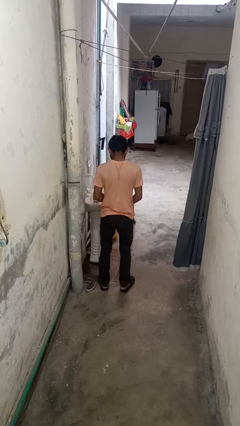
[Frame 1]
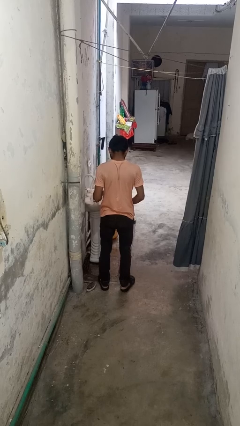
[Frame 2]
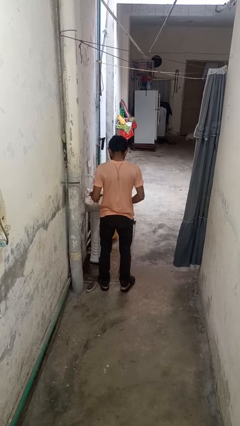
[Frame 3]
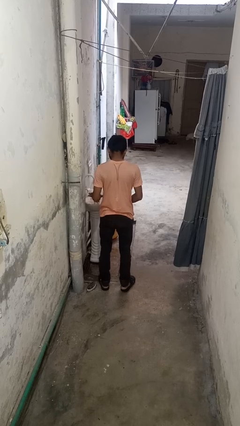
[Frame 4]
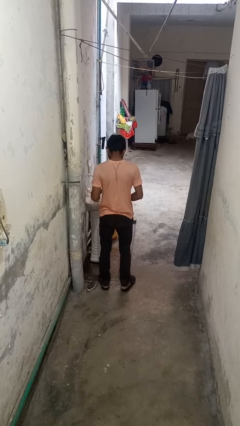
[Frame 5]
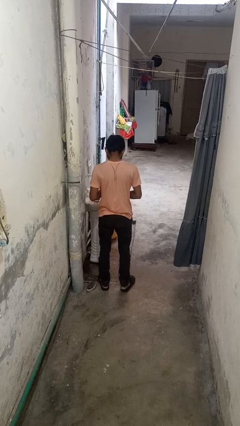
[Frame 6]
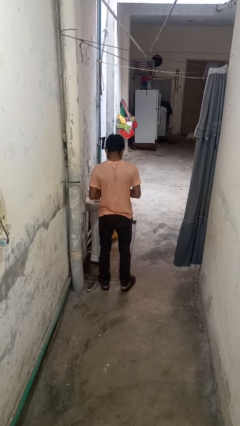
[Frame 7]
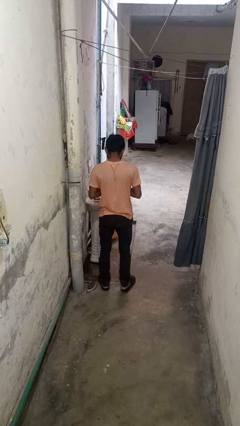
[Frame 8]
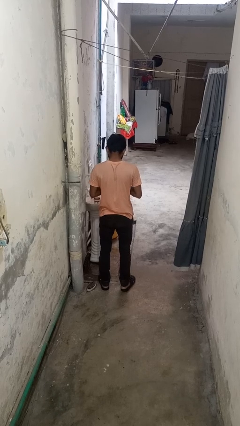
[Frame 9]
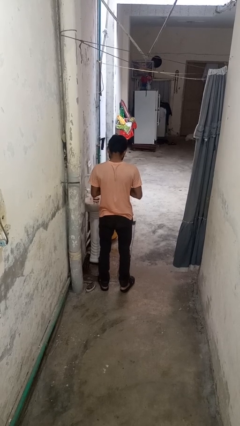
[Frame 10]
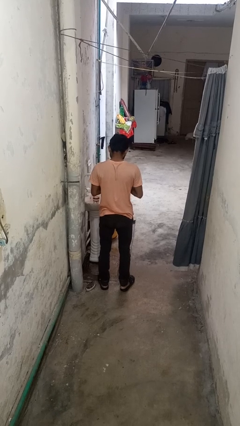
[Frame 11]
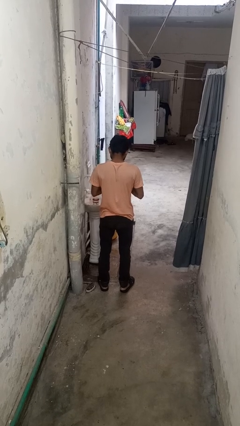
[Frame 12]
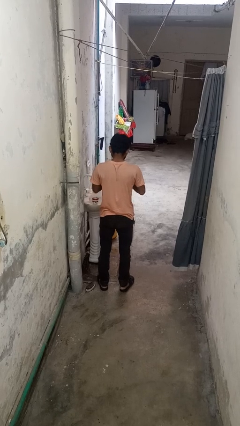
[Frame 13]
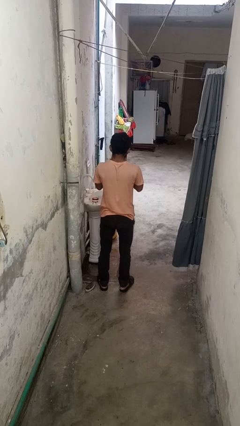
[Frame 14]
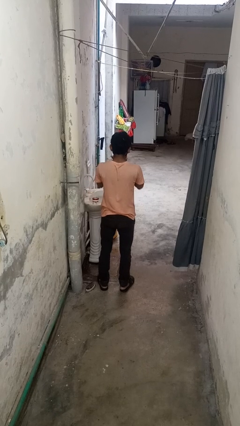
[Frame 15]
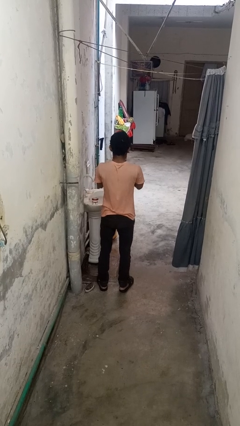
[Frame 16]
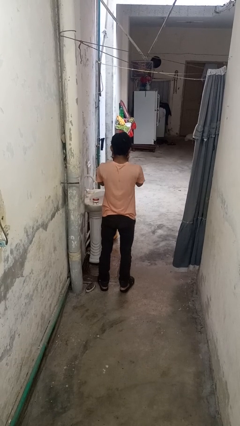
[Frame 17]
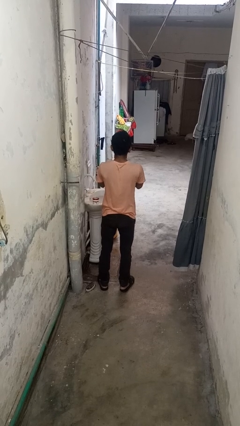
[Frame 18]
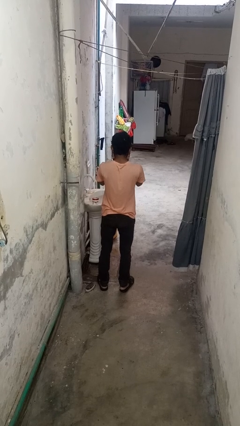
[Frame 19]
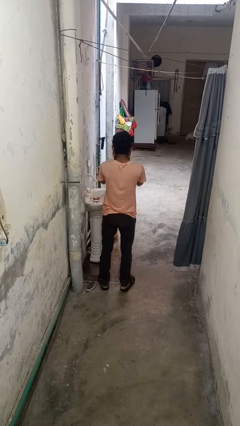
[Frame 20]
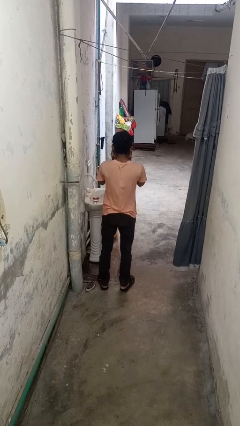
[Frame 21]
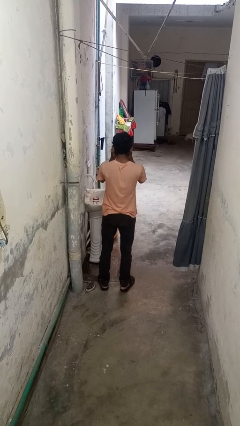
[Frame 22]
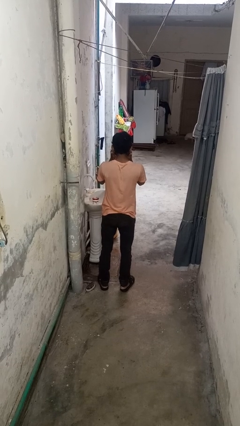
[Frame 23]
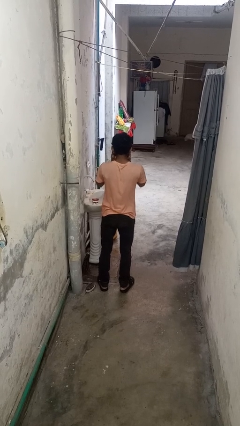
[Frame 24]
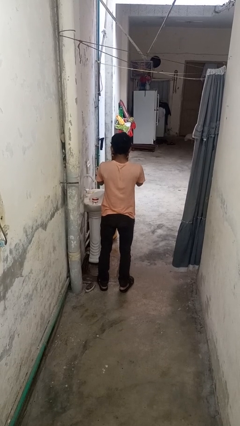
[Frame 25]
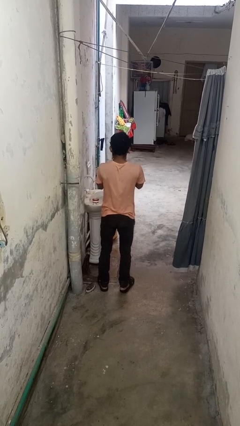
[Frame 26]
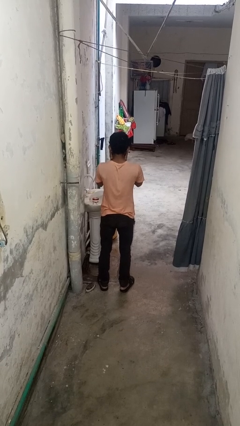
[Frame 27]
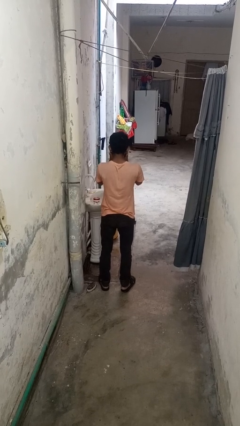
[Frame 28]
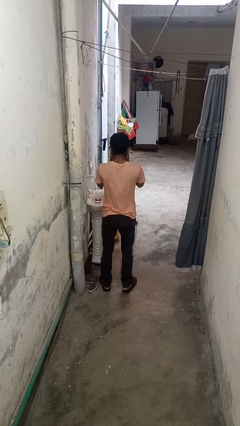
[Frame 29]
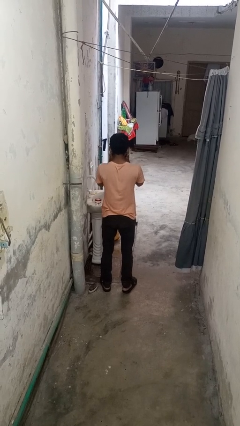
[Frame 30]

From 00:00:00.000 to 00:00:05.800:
person applies facial moisturizer

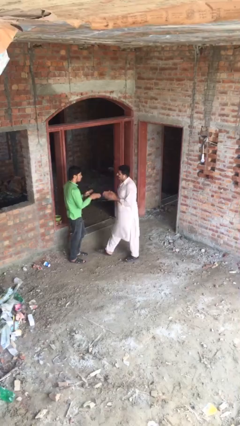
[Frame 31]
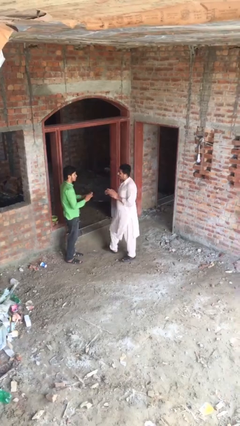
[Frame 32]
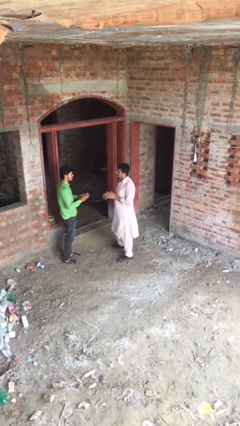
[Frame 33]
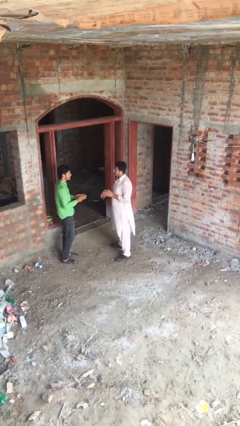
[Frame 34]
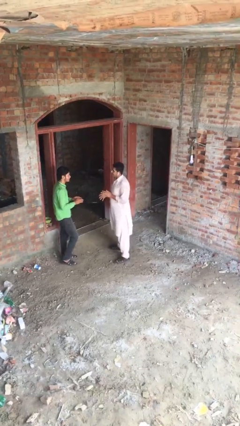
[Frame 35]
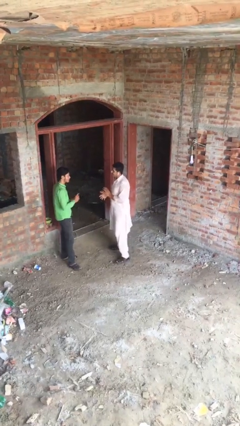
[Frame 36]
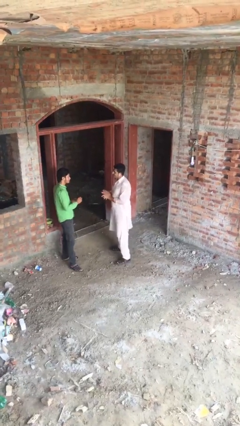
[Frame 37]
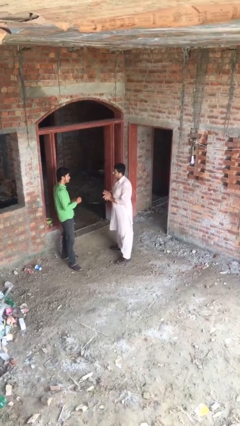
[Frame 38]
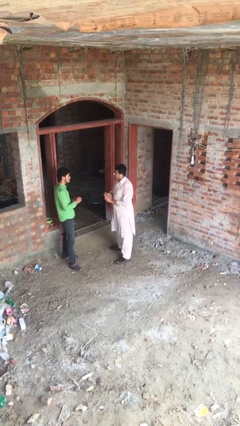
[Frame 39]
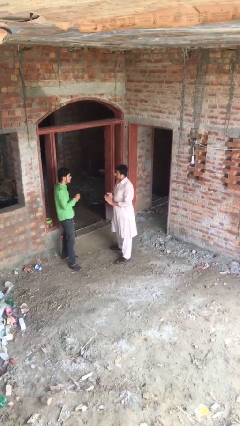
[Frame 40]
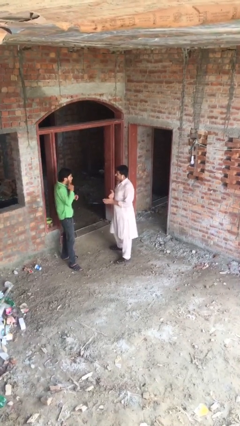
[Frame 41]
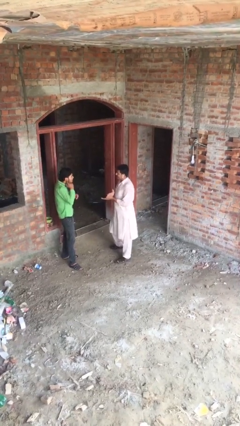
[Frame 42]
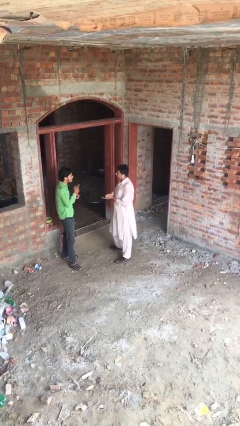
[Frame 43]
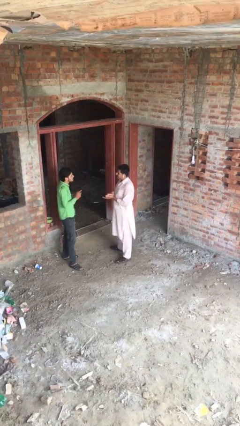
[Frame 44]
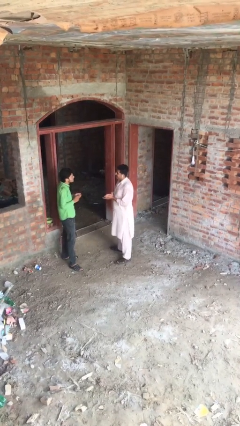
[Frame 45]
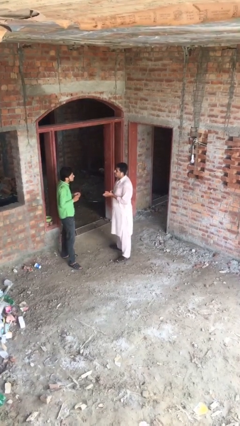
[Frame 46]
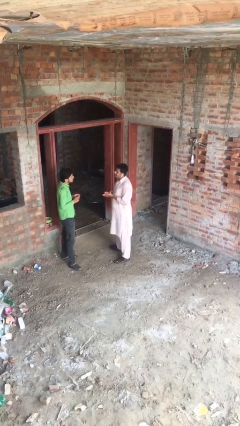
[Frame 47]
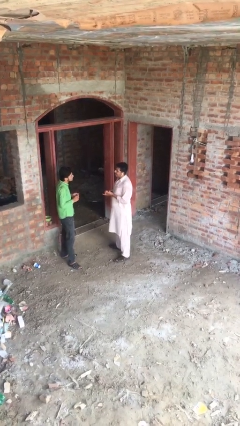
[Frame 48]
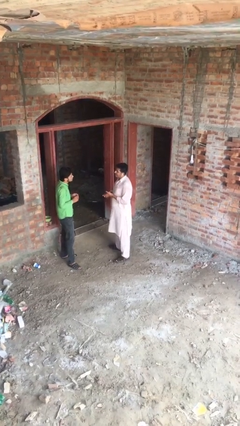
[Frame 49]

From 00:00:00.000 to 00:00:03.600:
person talks to person

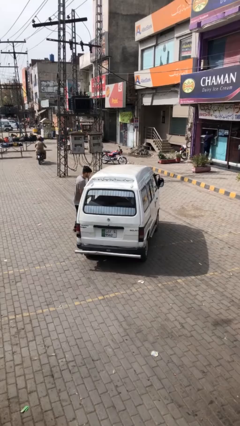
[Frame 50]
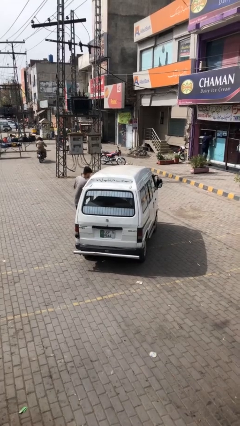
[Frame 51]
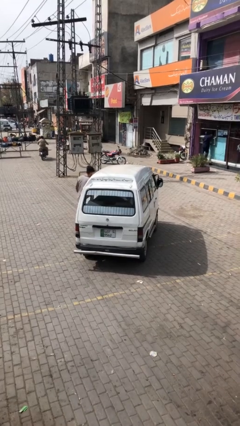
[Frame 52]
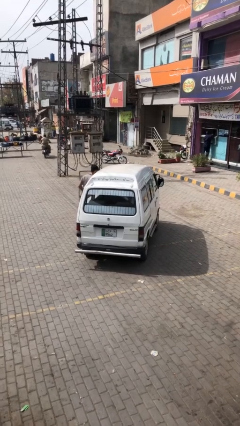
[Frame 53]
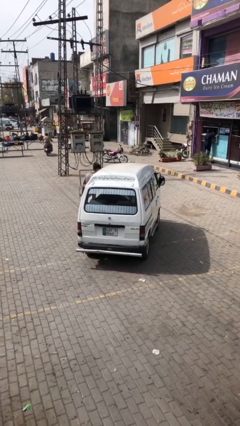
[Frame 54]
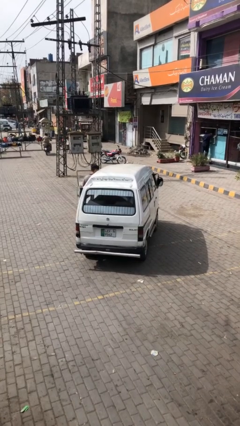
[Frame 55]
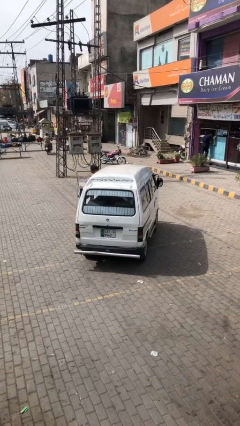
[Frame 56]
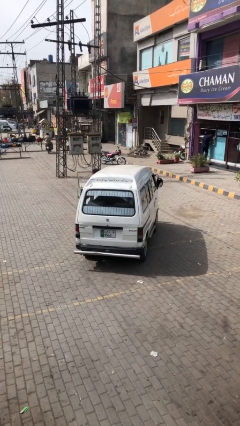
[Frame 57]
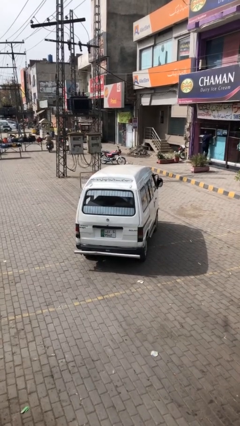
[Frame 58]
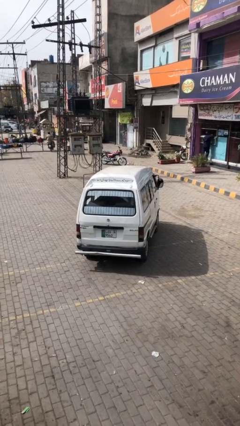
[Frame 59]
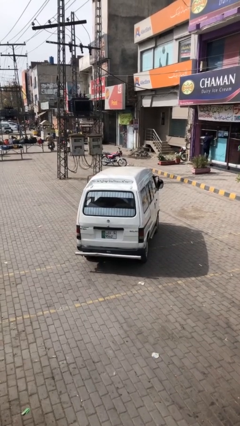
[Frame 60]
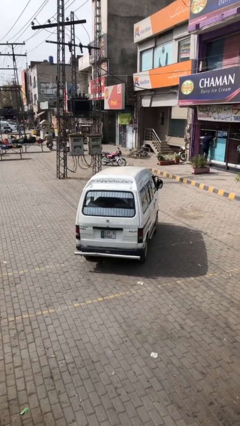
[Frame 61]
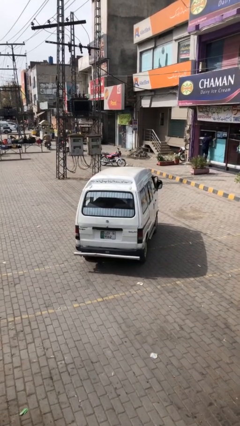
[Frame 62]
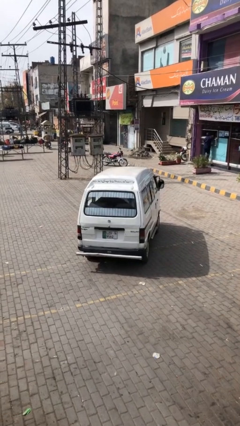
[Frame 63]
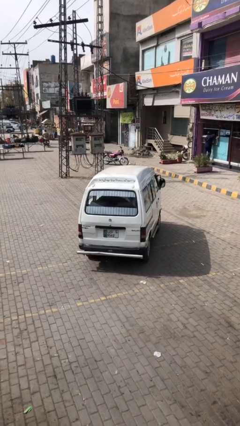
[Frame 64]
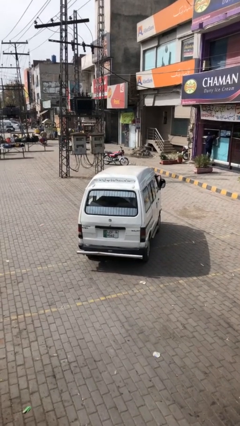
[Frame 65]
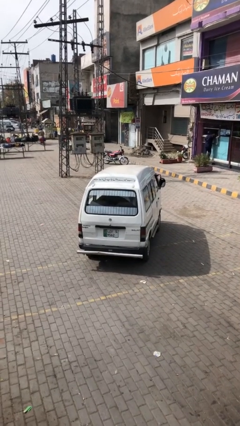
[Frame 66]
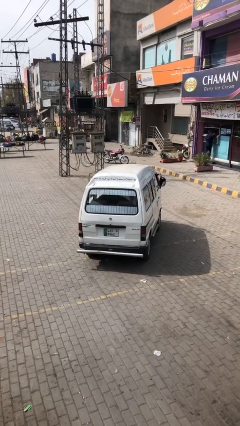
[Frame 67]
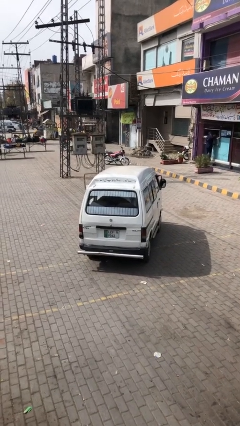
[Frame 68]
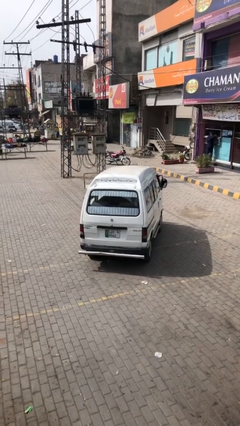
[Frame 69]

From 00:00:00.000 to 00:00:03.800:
car picks up person

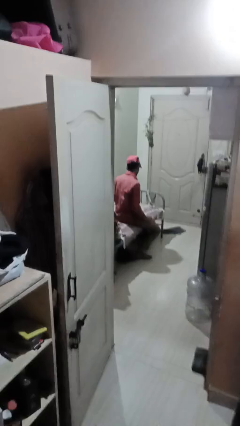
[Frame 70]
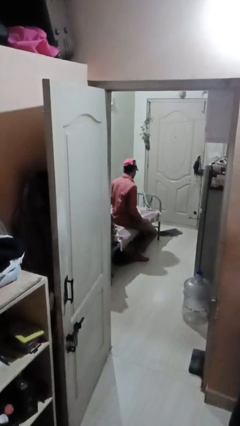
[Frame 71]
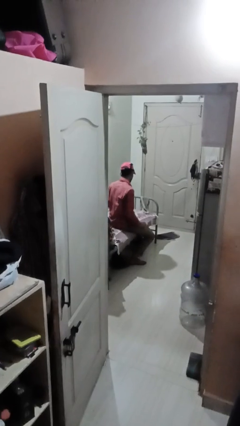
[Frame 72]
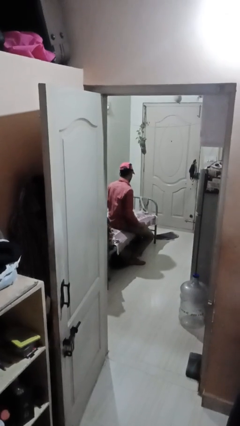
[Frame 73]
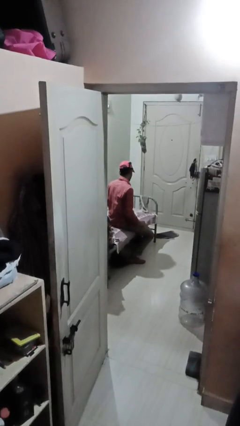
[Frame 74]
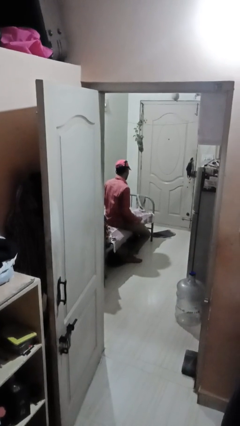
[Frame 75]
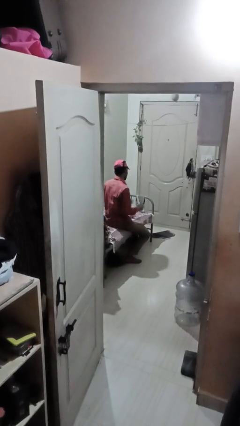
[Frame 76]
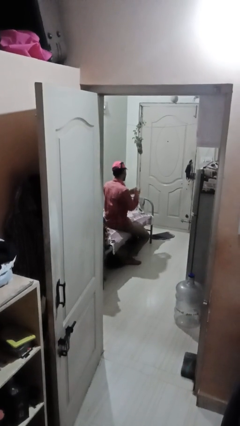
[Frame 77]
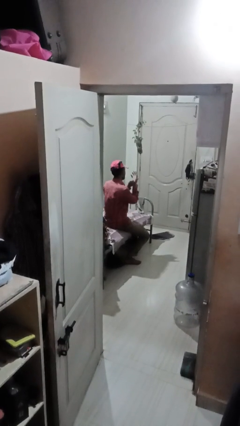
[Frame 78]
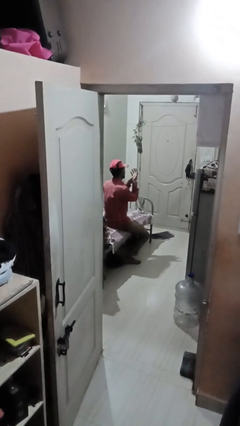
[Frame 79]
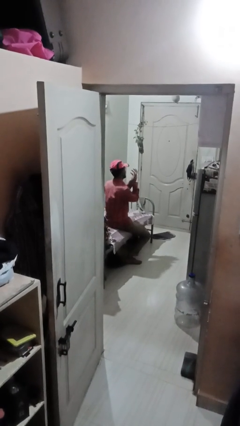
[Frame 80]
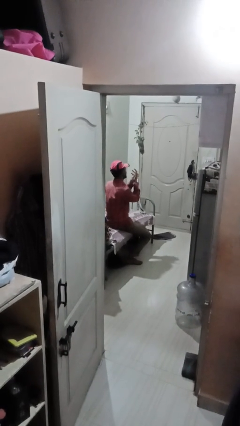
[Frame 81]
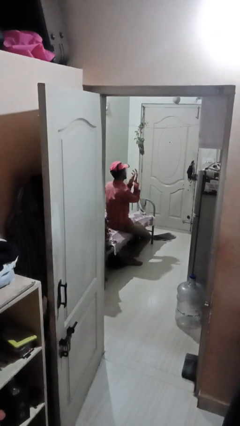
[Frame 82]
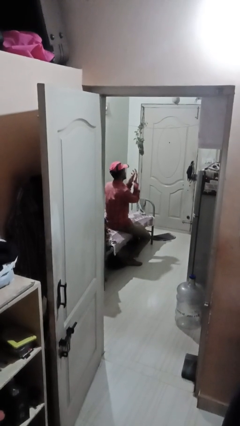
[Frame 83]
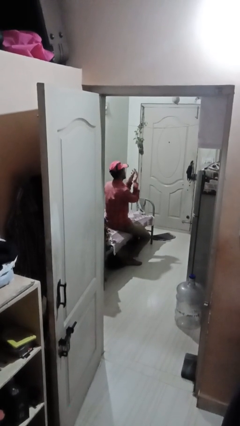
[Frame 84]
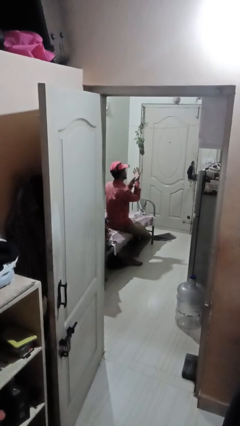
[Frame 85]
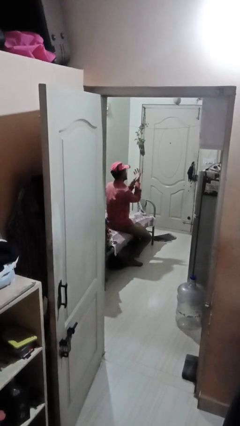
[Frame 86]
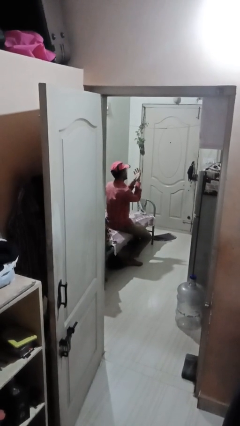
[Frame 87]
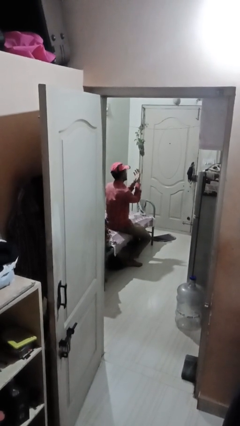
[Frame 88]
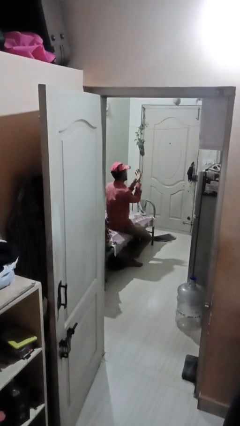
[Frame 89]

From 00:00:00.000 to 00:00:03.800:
person looks at hands in lap

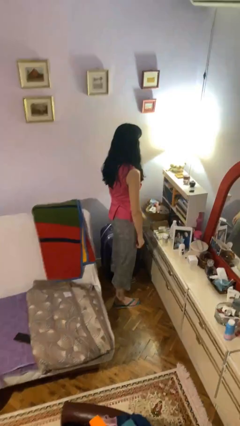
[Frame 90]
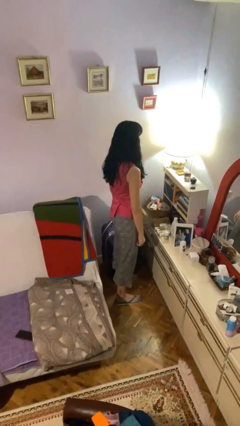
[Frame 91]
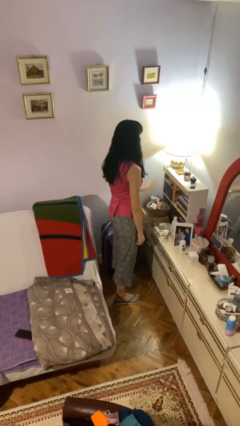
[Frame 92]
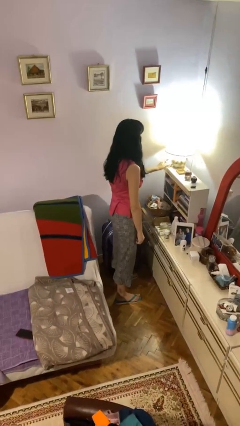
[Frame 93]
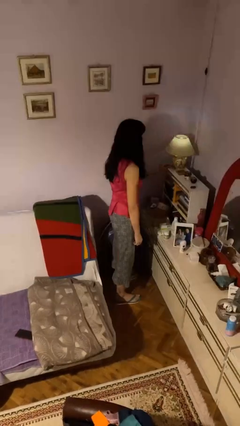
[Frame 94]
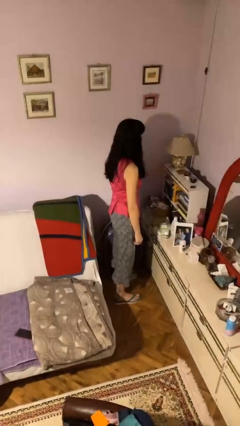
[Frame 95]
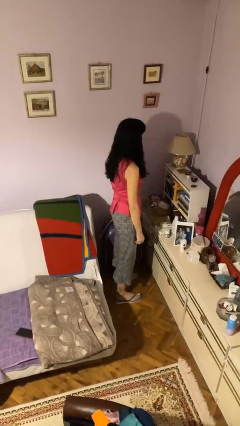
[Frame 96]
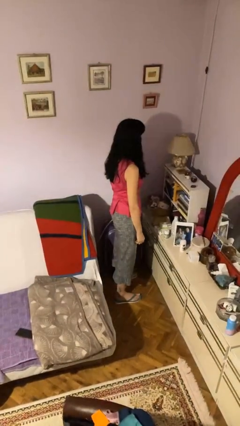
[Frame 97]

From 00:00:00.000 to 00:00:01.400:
person turns off lamp
